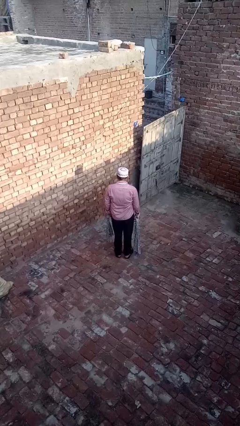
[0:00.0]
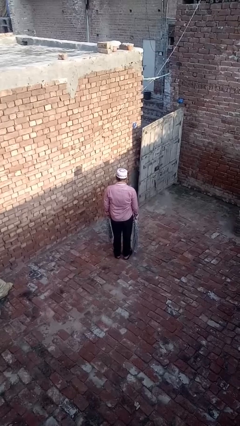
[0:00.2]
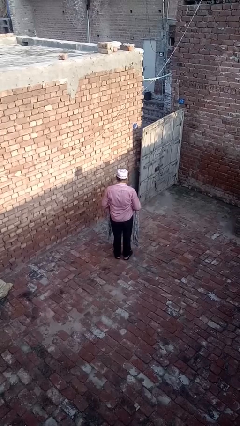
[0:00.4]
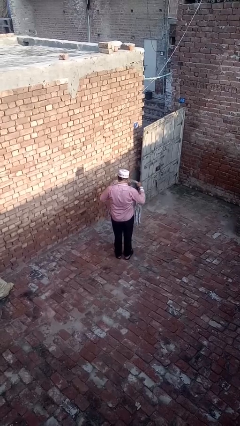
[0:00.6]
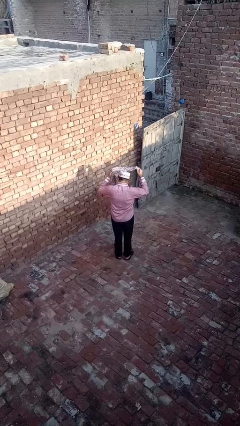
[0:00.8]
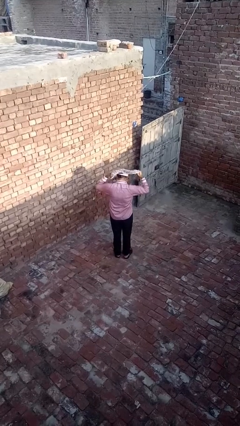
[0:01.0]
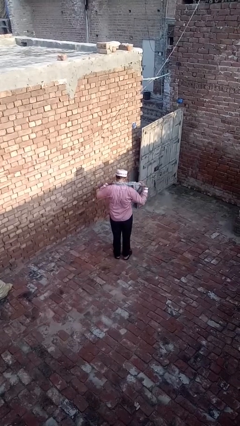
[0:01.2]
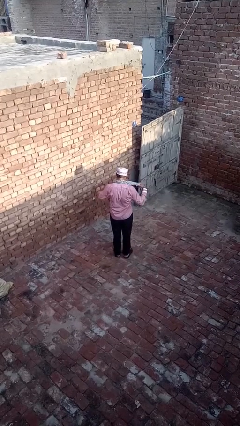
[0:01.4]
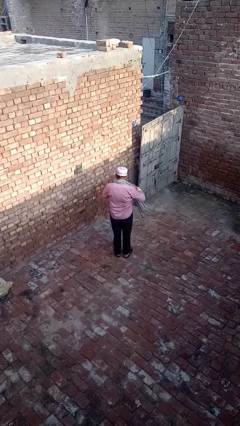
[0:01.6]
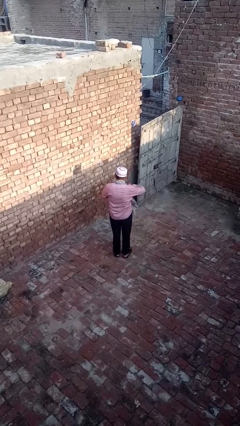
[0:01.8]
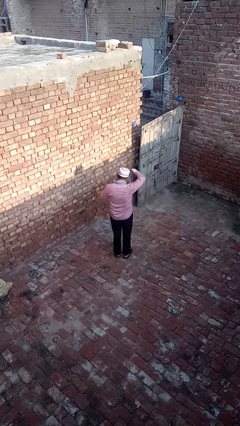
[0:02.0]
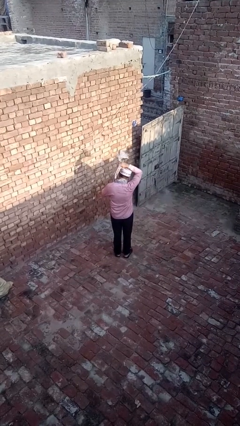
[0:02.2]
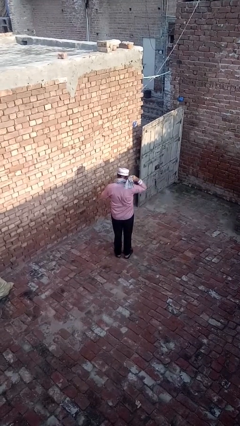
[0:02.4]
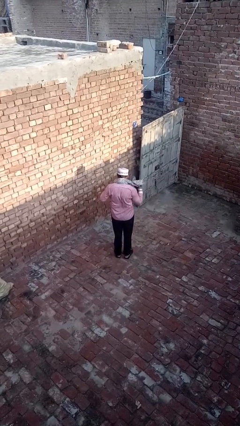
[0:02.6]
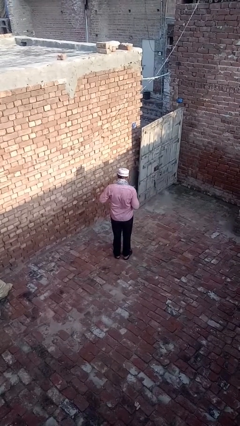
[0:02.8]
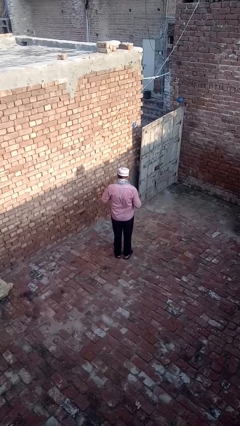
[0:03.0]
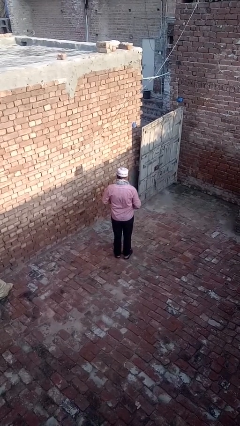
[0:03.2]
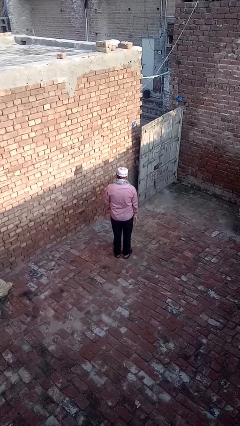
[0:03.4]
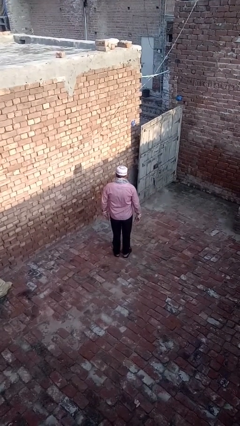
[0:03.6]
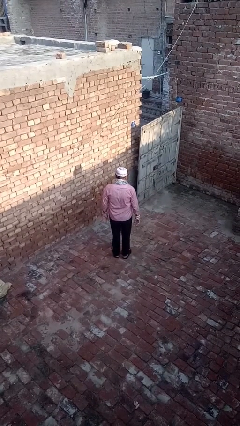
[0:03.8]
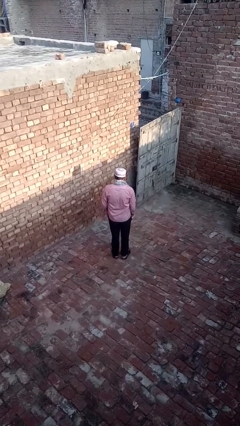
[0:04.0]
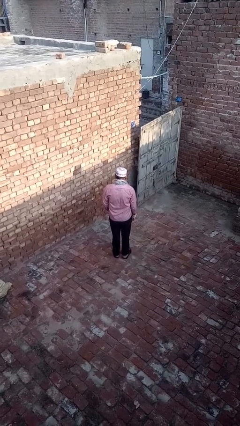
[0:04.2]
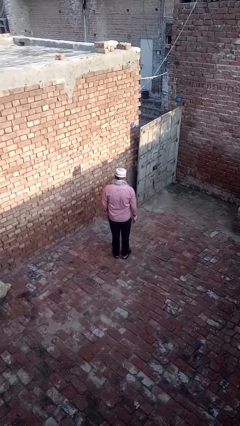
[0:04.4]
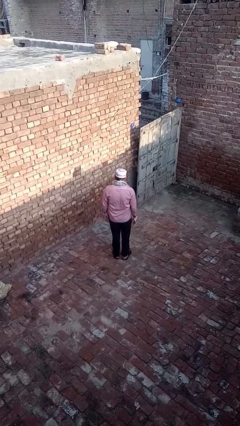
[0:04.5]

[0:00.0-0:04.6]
person puts on scarf

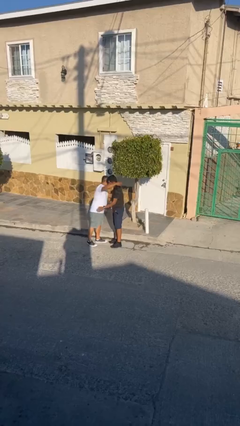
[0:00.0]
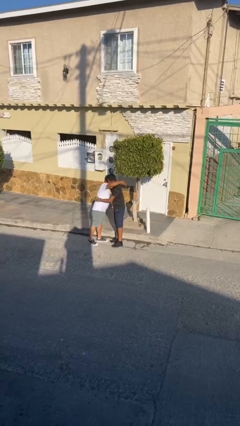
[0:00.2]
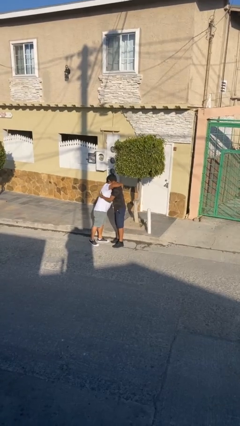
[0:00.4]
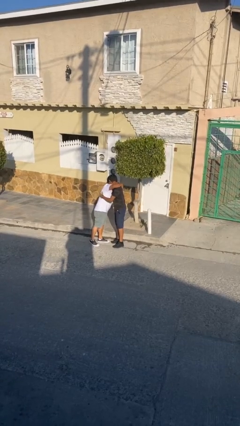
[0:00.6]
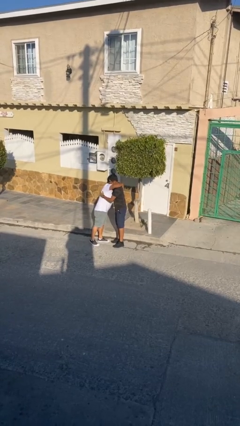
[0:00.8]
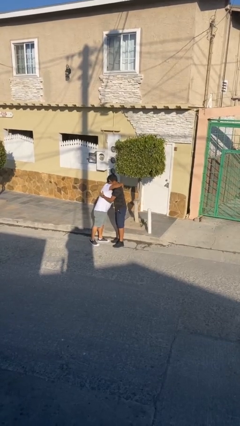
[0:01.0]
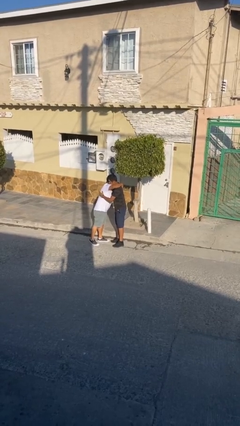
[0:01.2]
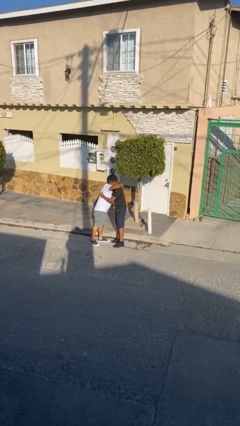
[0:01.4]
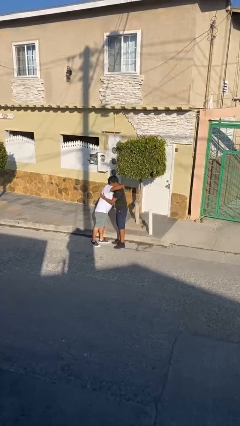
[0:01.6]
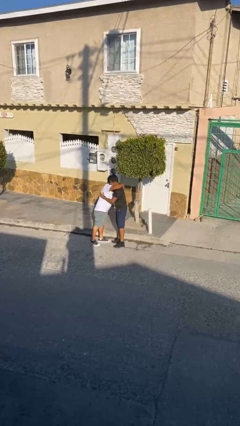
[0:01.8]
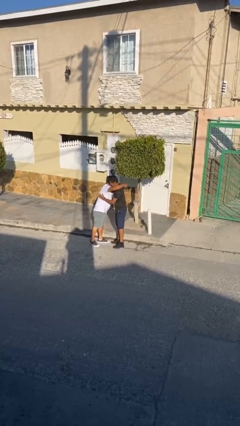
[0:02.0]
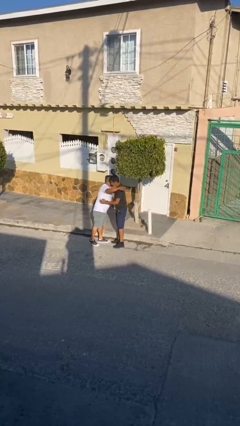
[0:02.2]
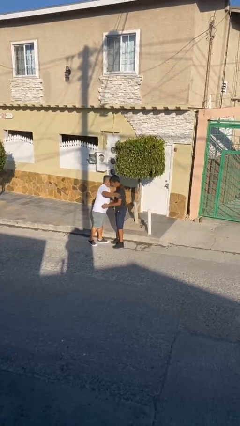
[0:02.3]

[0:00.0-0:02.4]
person embraces person

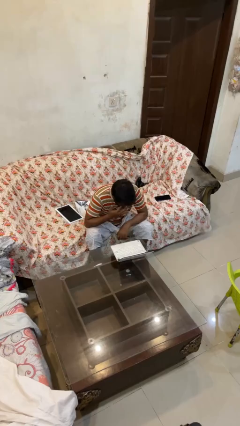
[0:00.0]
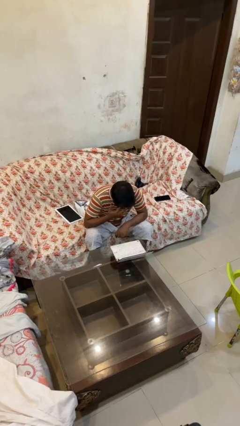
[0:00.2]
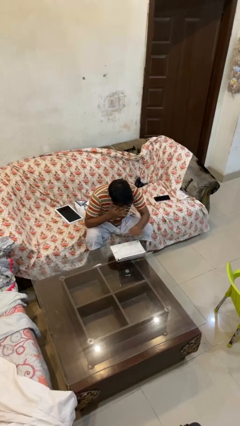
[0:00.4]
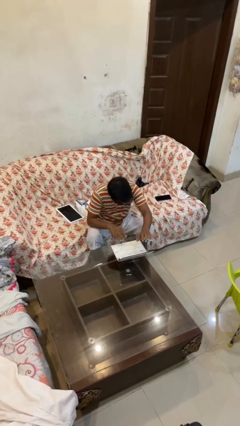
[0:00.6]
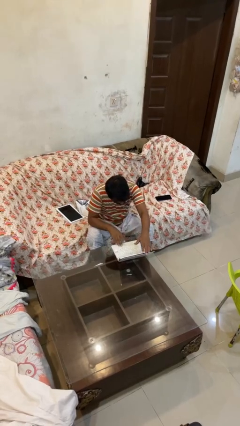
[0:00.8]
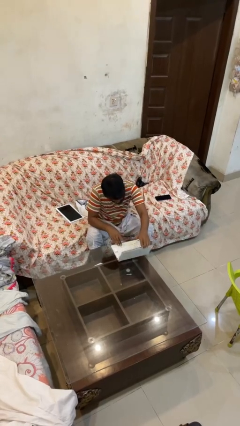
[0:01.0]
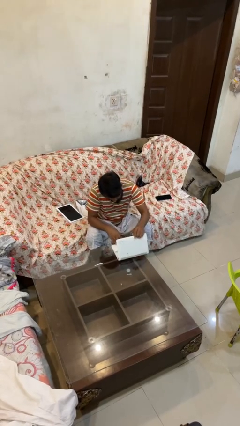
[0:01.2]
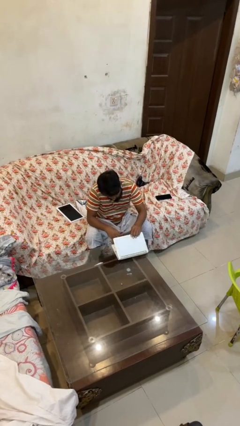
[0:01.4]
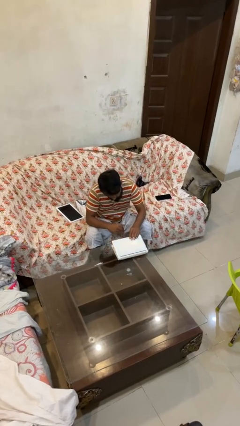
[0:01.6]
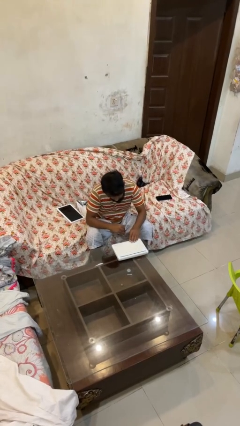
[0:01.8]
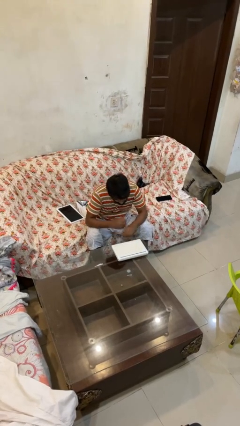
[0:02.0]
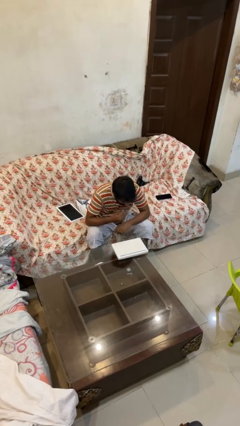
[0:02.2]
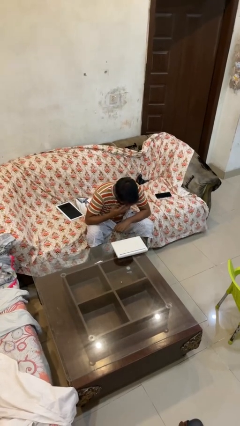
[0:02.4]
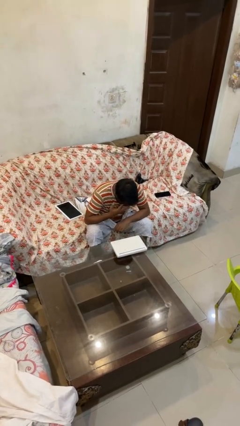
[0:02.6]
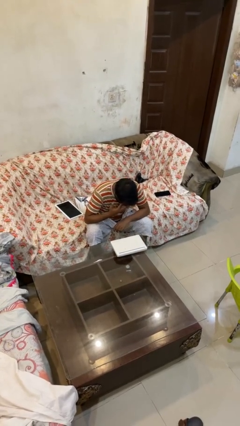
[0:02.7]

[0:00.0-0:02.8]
person closes laptop

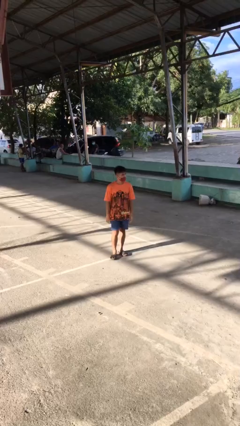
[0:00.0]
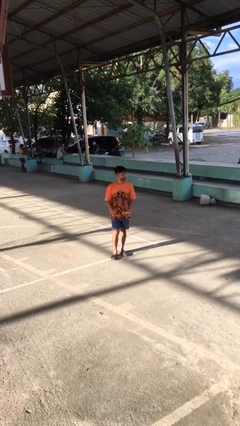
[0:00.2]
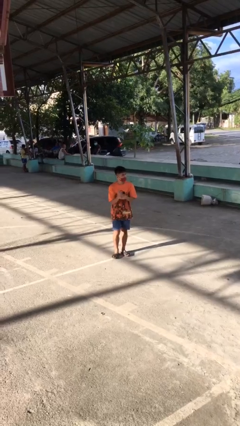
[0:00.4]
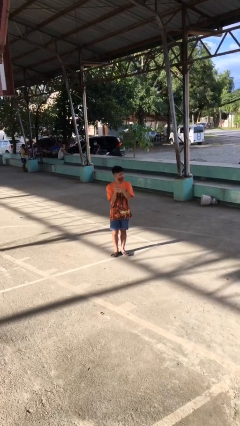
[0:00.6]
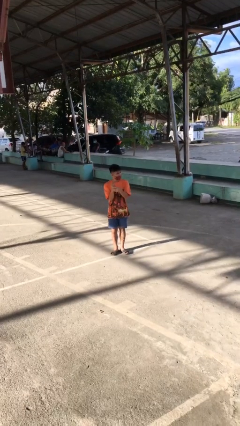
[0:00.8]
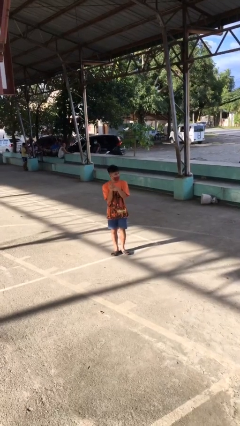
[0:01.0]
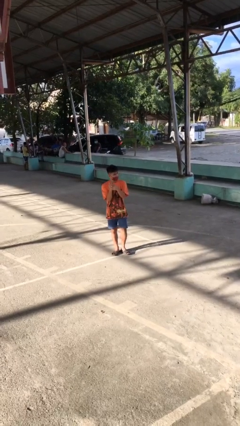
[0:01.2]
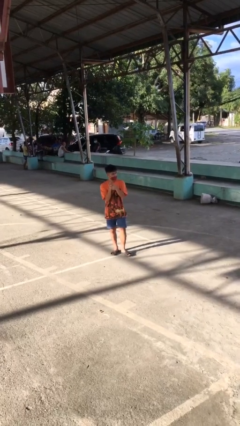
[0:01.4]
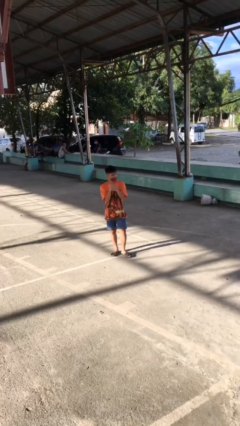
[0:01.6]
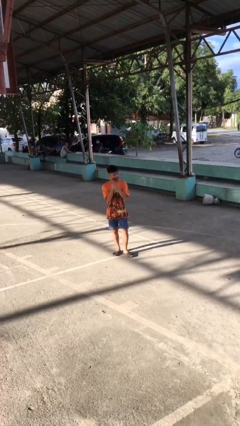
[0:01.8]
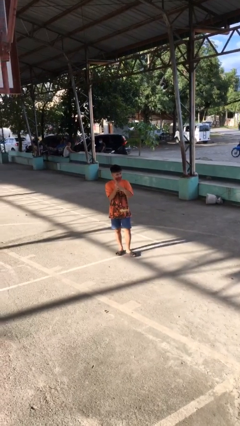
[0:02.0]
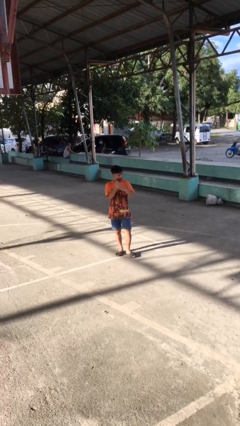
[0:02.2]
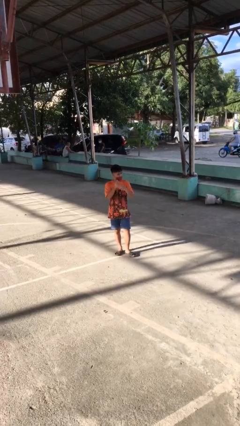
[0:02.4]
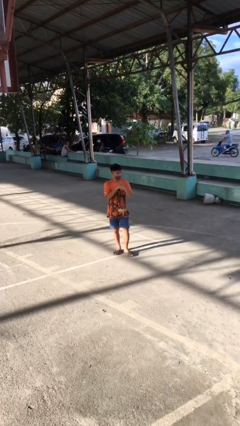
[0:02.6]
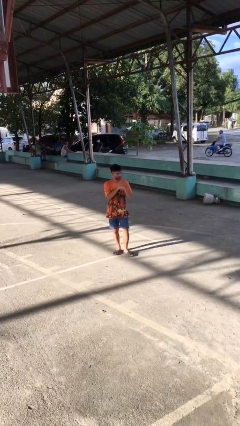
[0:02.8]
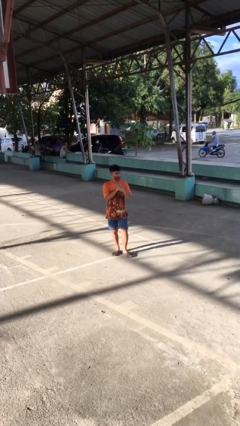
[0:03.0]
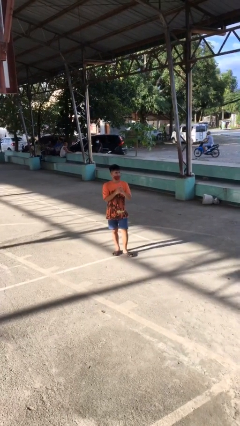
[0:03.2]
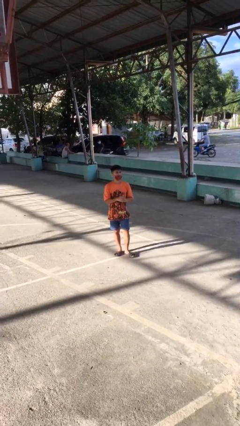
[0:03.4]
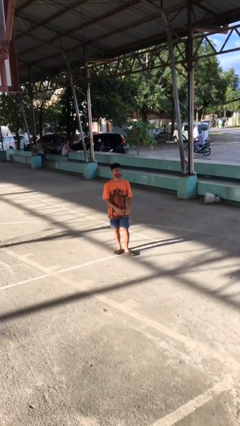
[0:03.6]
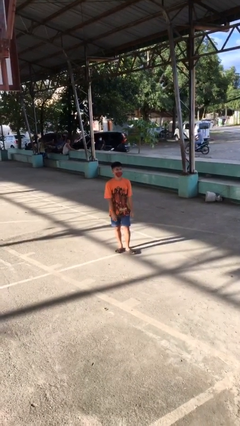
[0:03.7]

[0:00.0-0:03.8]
person cracks knuckles

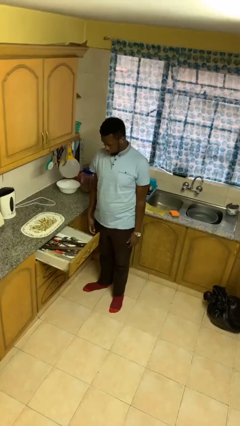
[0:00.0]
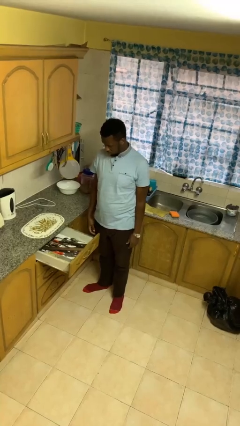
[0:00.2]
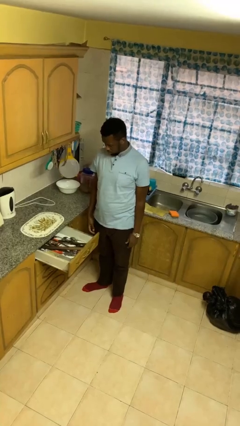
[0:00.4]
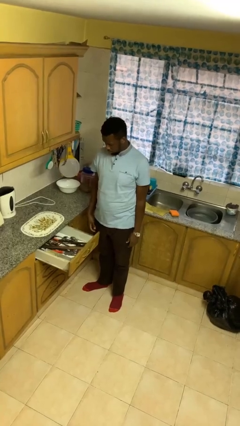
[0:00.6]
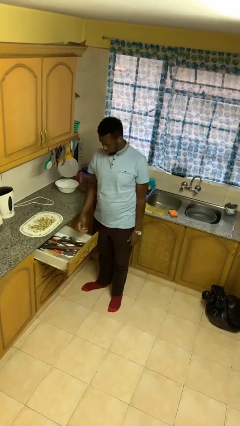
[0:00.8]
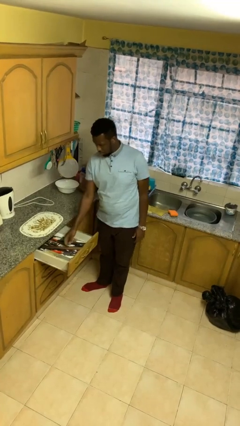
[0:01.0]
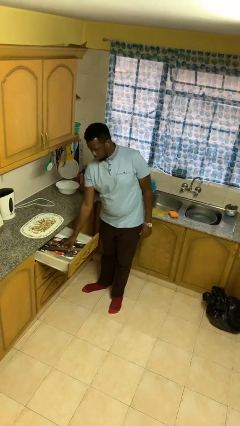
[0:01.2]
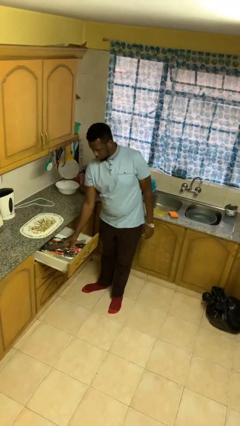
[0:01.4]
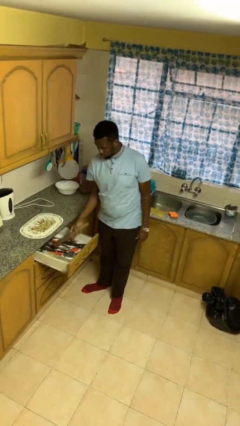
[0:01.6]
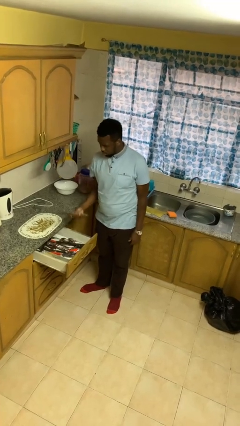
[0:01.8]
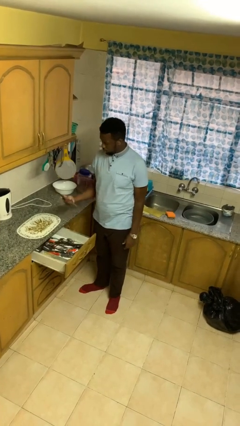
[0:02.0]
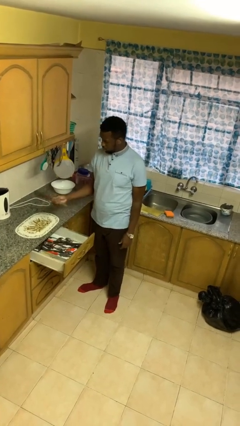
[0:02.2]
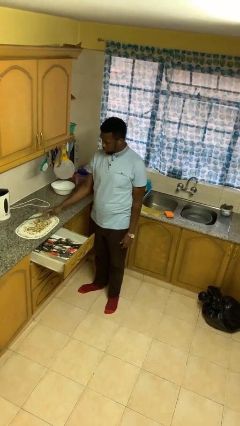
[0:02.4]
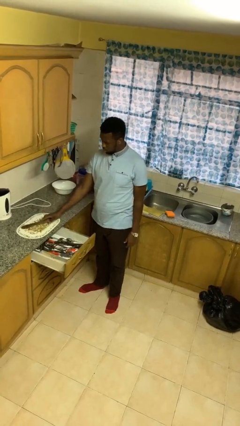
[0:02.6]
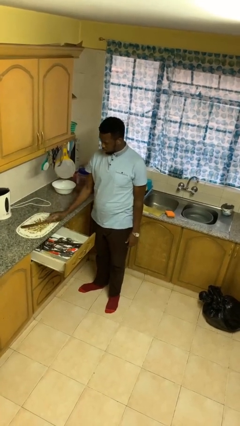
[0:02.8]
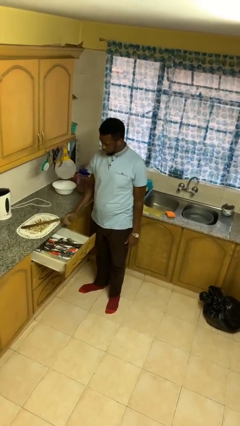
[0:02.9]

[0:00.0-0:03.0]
person takes object from kitchen drawer

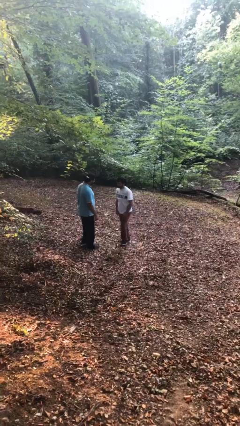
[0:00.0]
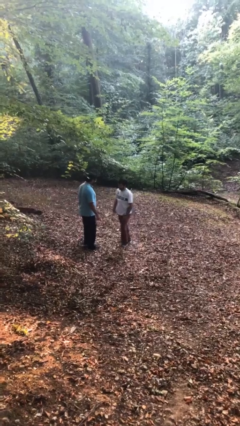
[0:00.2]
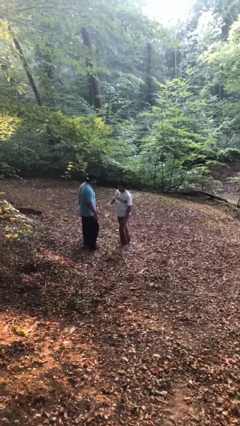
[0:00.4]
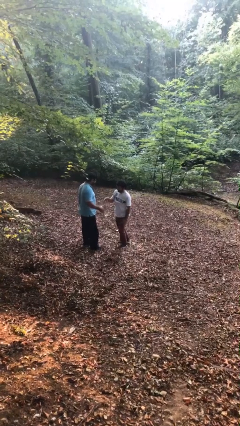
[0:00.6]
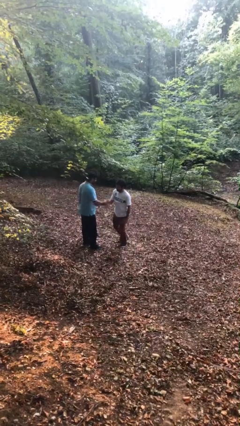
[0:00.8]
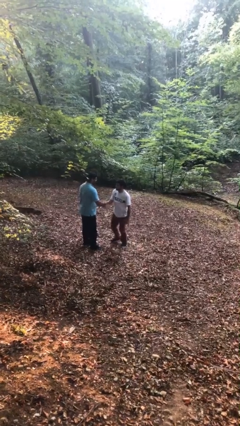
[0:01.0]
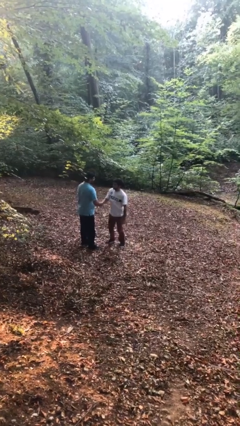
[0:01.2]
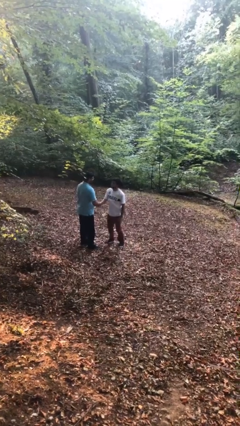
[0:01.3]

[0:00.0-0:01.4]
person shakes hand
